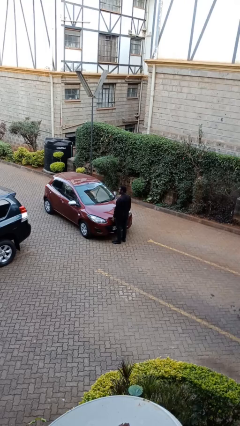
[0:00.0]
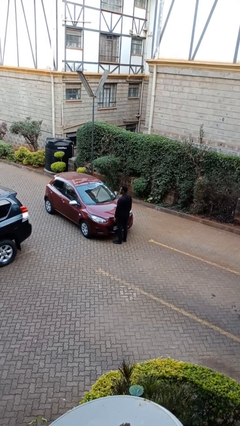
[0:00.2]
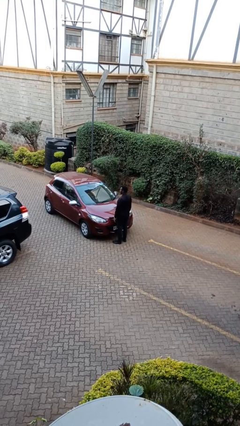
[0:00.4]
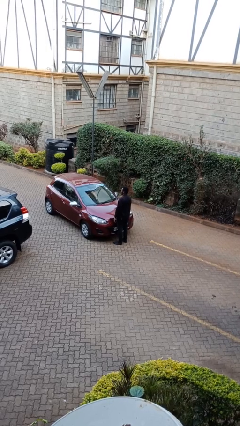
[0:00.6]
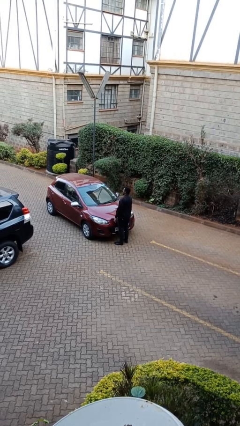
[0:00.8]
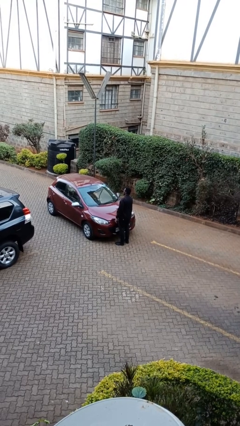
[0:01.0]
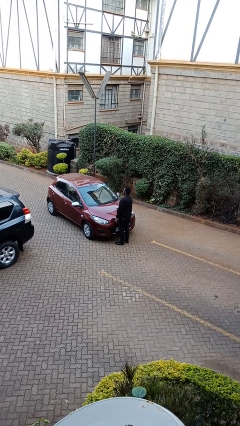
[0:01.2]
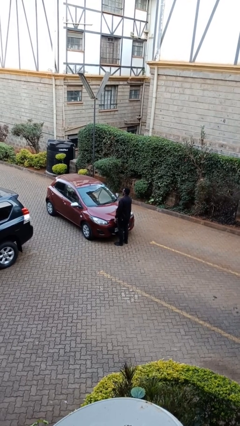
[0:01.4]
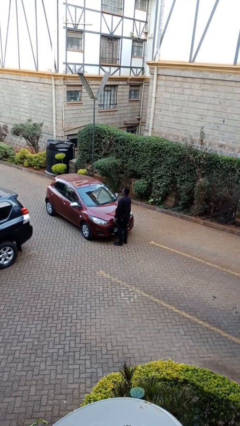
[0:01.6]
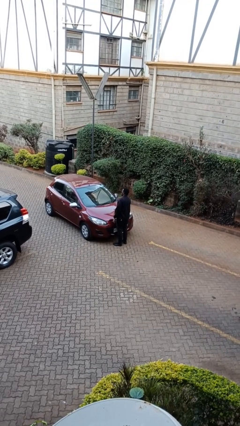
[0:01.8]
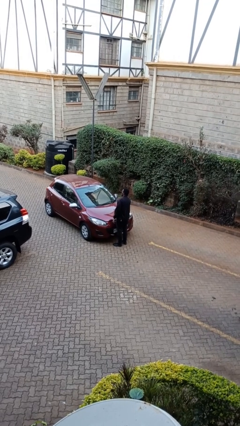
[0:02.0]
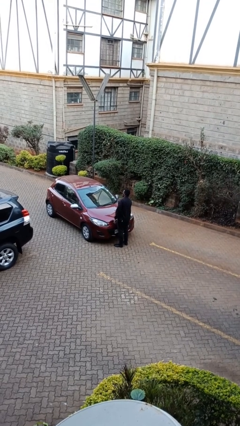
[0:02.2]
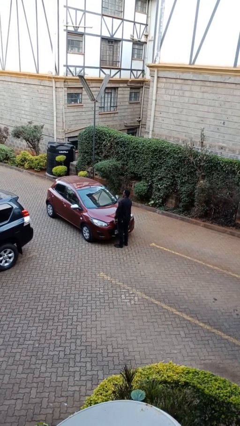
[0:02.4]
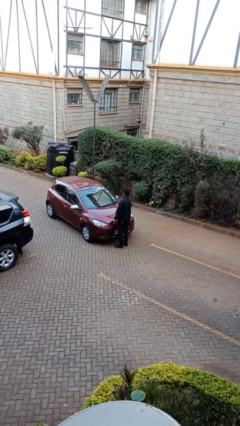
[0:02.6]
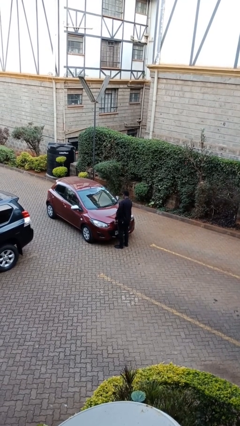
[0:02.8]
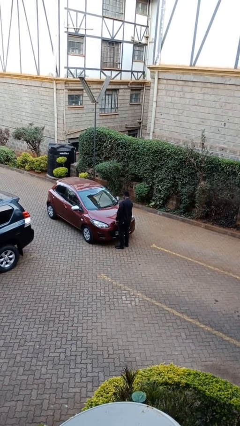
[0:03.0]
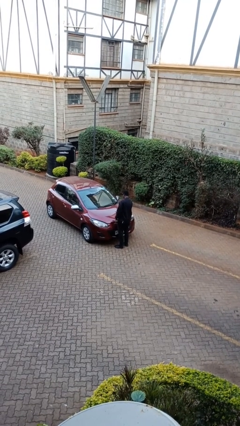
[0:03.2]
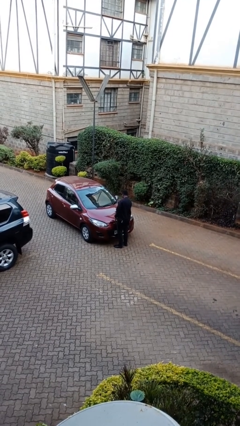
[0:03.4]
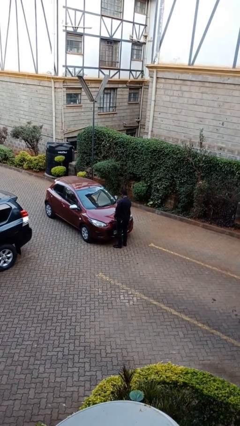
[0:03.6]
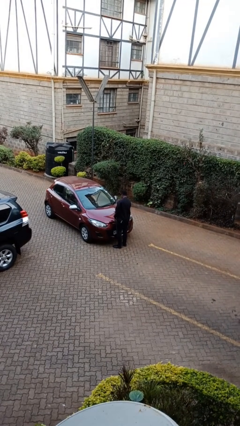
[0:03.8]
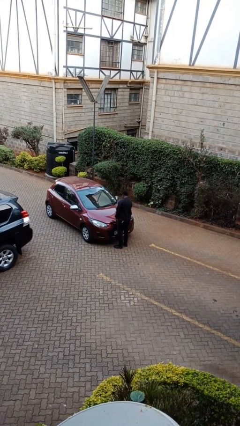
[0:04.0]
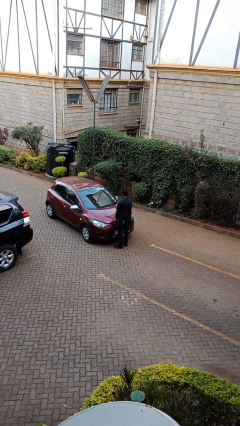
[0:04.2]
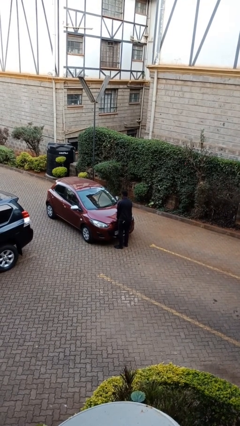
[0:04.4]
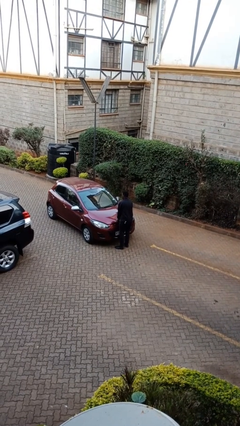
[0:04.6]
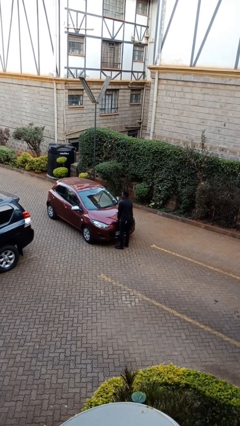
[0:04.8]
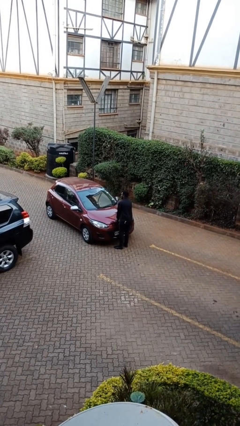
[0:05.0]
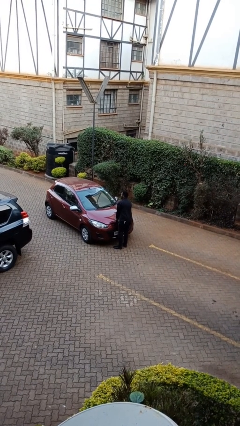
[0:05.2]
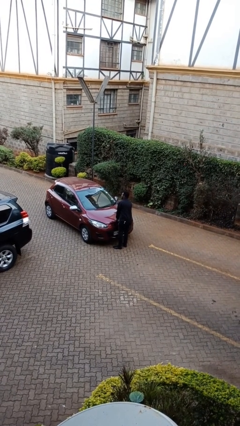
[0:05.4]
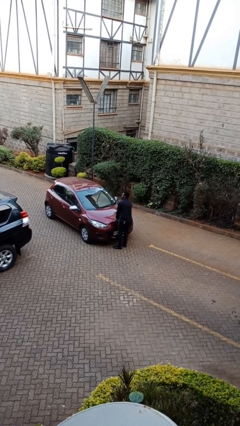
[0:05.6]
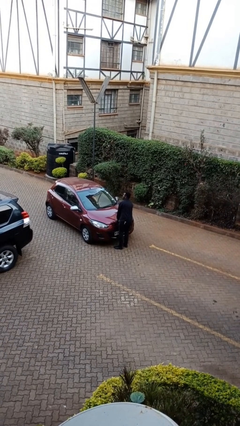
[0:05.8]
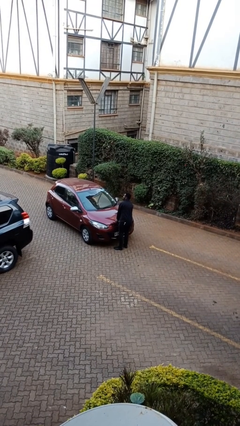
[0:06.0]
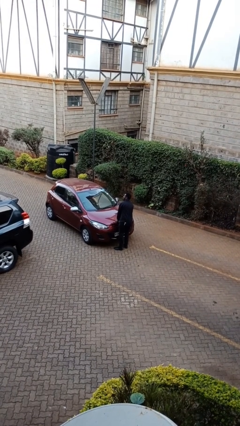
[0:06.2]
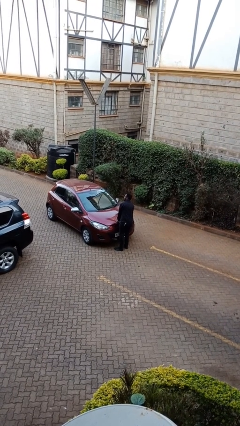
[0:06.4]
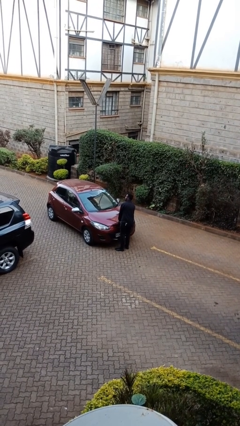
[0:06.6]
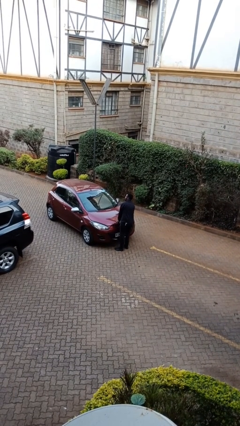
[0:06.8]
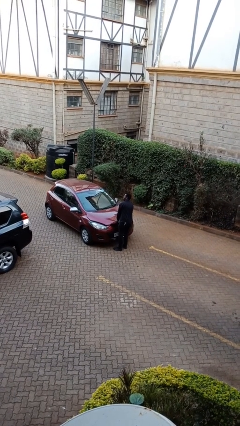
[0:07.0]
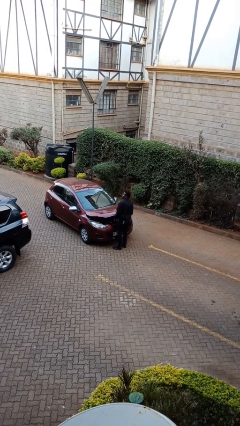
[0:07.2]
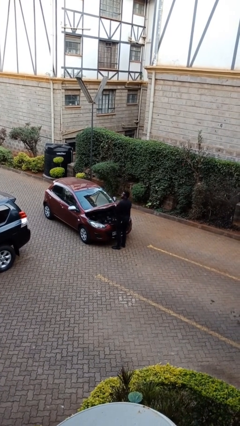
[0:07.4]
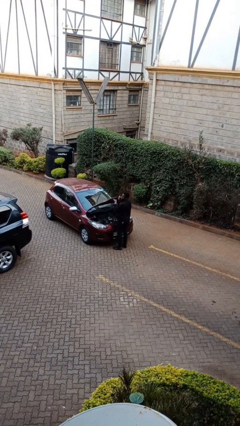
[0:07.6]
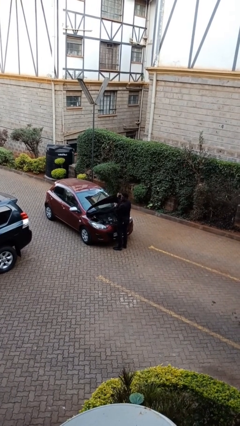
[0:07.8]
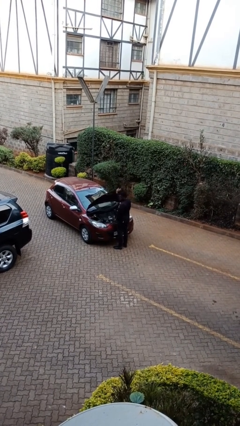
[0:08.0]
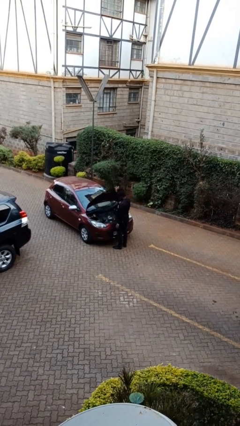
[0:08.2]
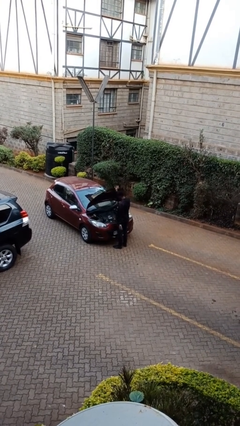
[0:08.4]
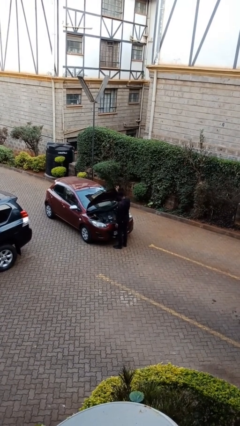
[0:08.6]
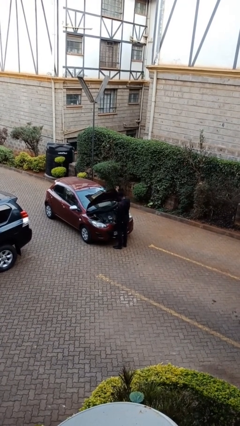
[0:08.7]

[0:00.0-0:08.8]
person opens car hood

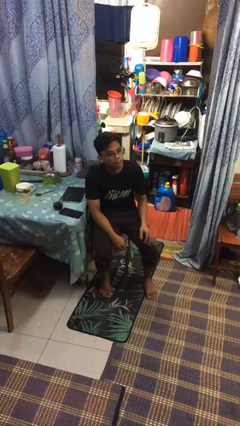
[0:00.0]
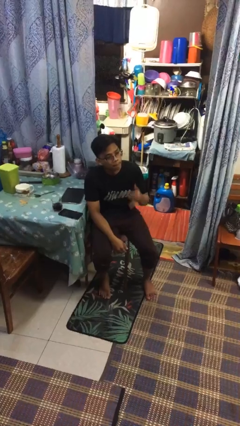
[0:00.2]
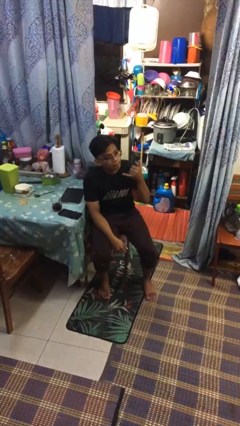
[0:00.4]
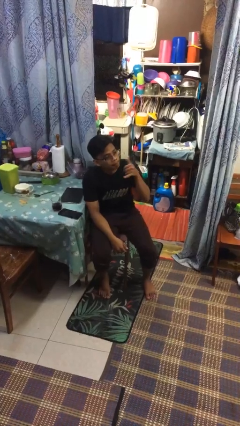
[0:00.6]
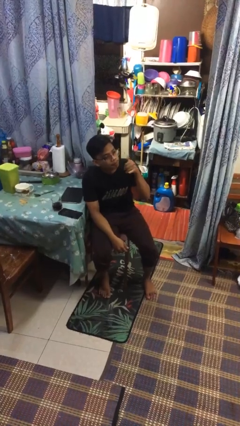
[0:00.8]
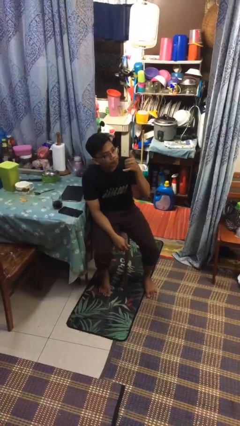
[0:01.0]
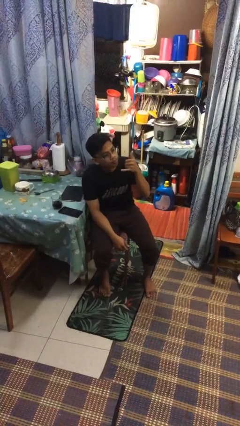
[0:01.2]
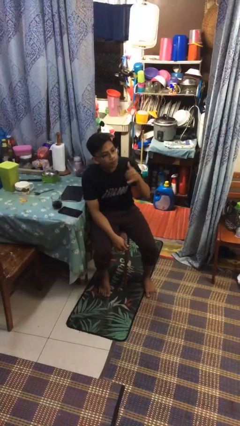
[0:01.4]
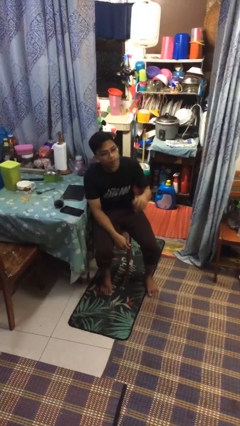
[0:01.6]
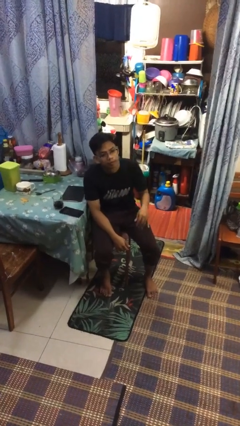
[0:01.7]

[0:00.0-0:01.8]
person gestures hang loose

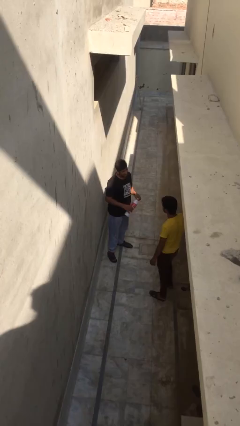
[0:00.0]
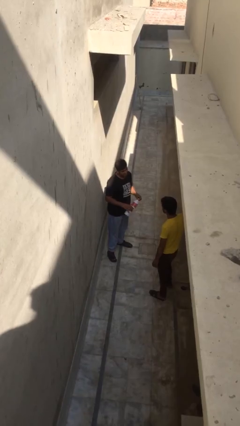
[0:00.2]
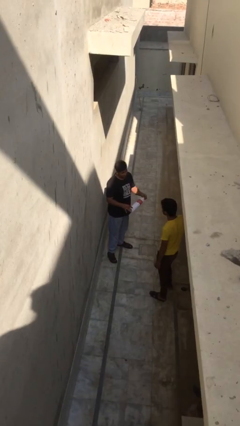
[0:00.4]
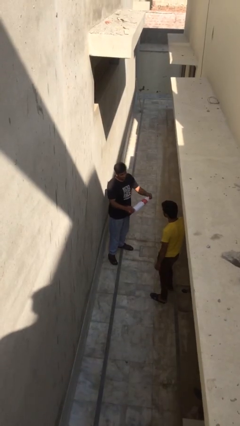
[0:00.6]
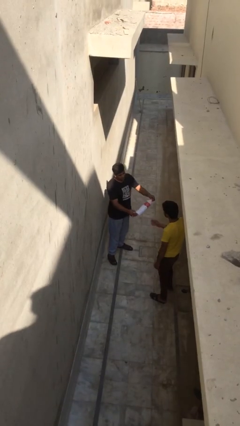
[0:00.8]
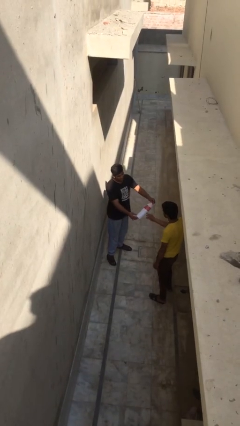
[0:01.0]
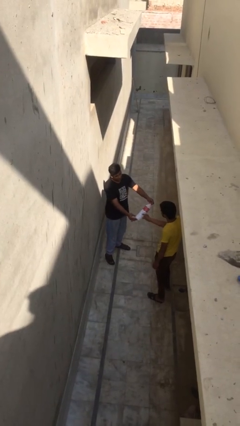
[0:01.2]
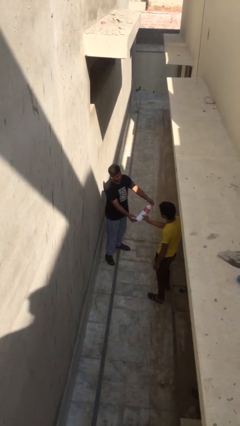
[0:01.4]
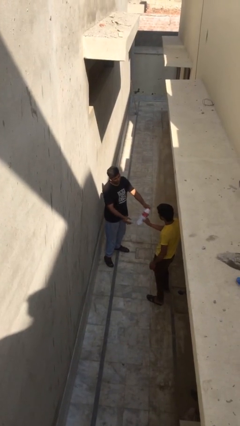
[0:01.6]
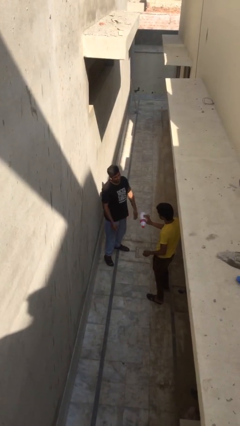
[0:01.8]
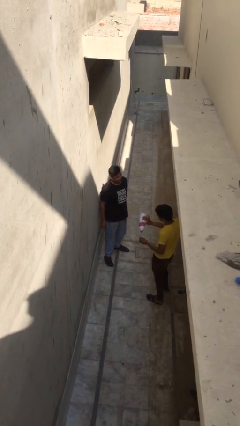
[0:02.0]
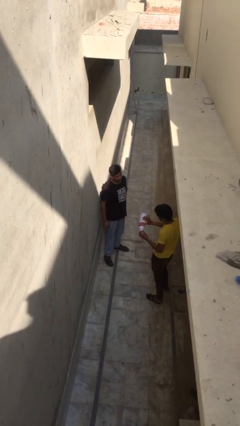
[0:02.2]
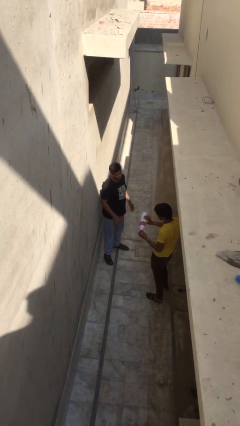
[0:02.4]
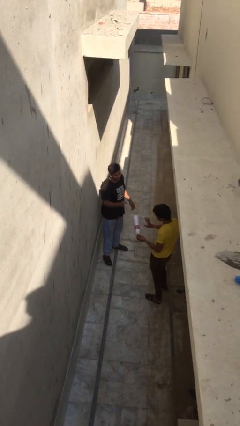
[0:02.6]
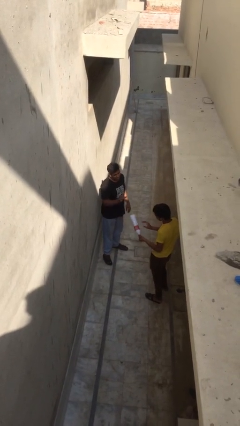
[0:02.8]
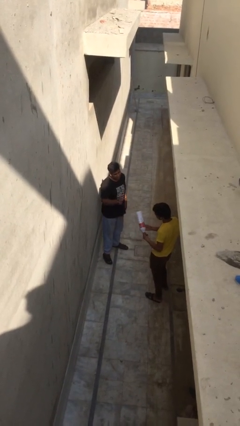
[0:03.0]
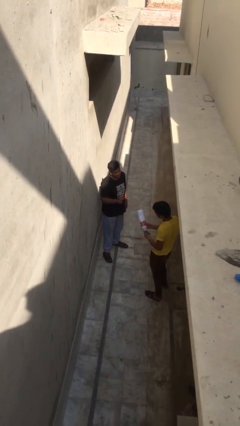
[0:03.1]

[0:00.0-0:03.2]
person transfers object to person

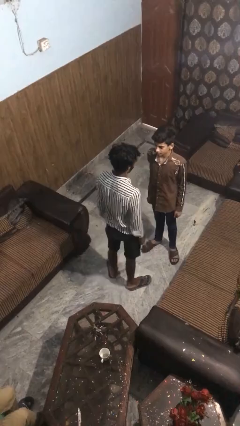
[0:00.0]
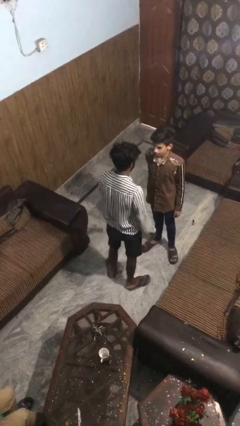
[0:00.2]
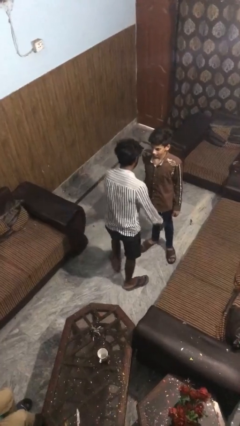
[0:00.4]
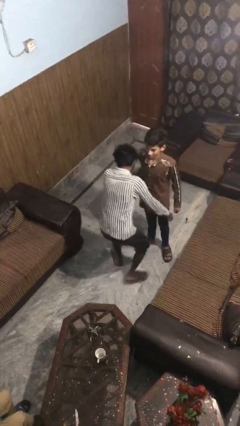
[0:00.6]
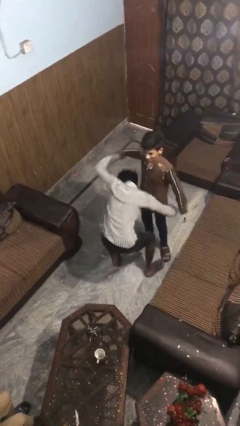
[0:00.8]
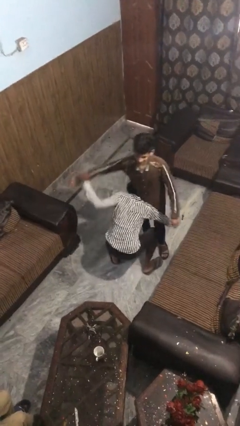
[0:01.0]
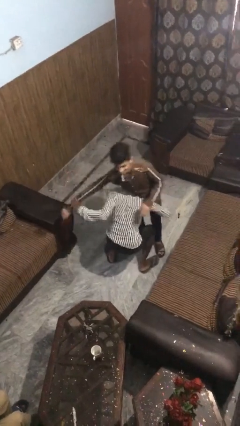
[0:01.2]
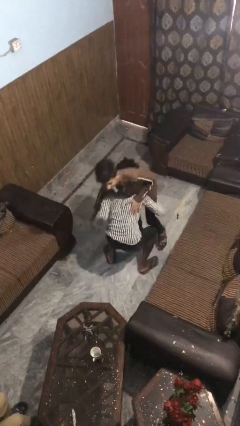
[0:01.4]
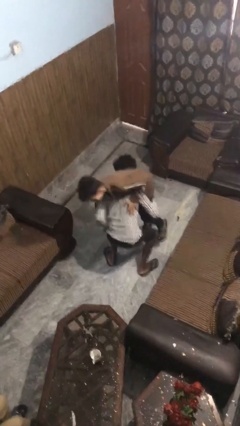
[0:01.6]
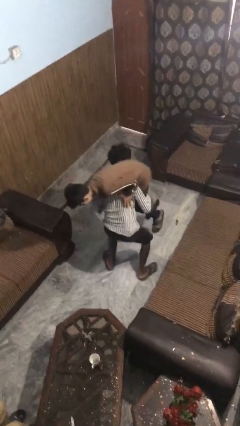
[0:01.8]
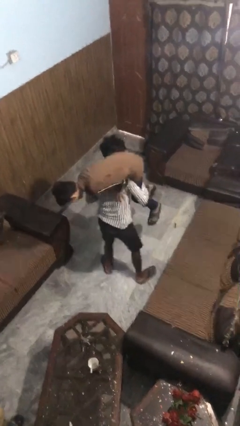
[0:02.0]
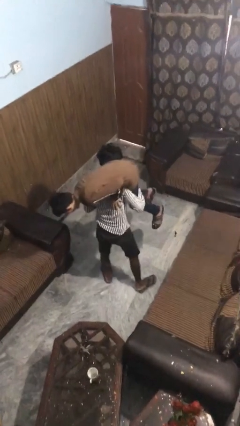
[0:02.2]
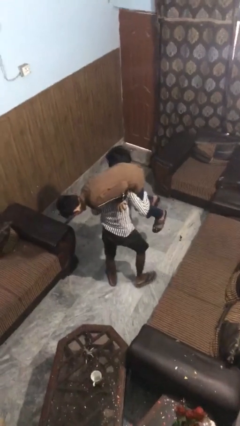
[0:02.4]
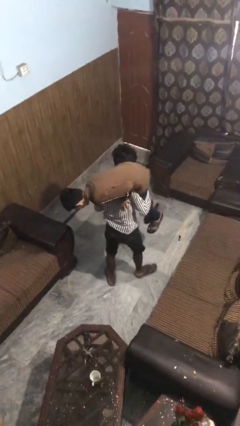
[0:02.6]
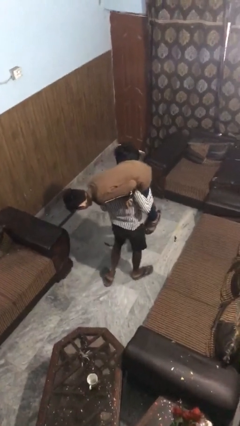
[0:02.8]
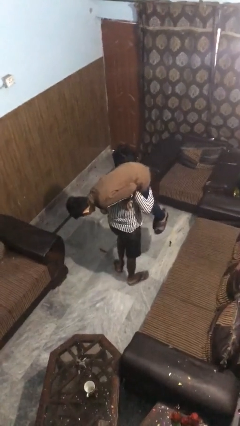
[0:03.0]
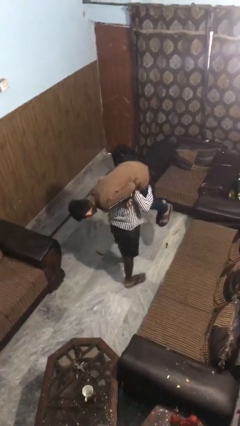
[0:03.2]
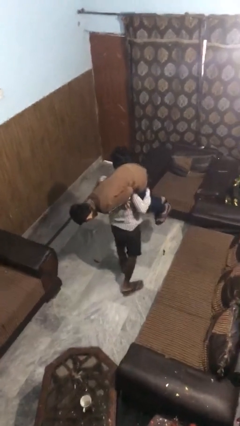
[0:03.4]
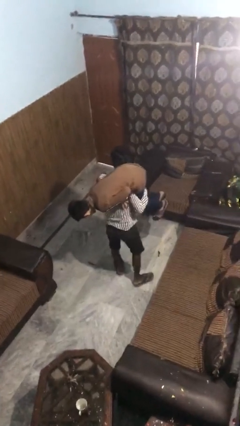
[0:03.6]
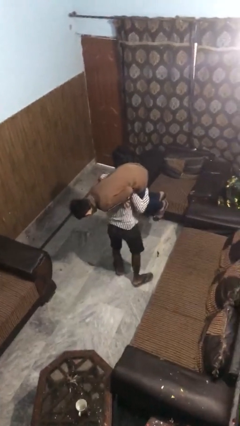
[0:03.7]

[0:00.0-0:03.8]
person carries person on shoulders
